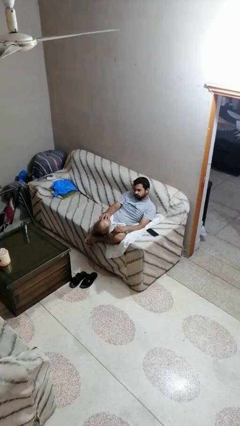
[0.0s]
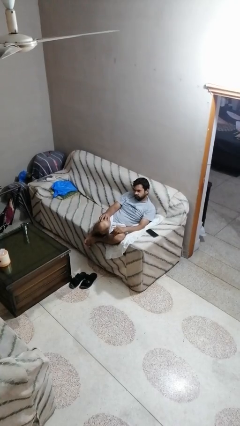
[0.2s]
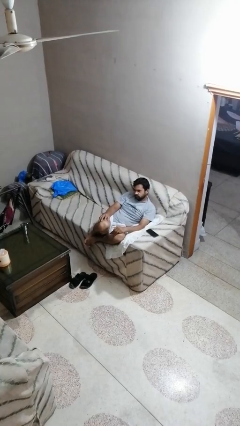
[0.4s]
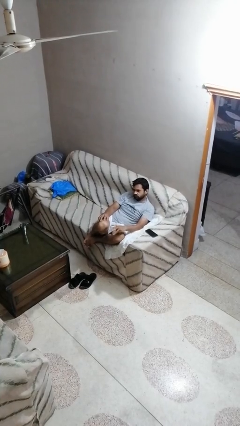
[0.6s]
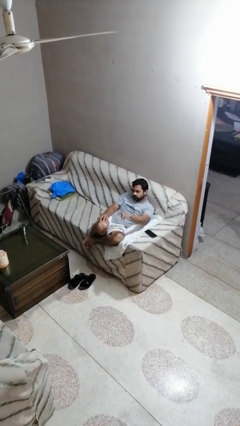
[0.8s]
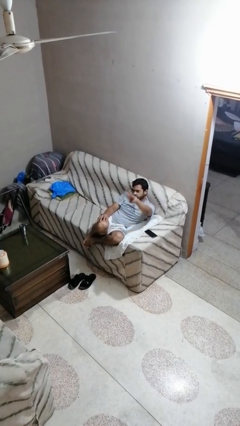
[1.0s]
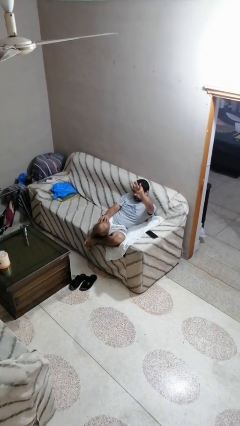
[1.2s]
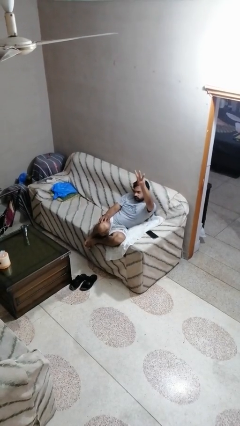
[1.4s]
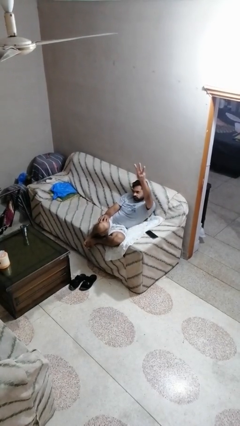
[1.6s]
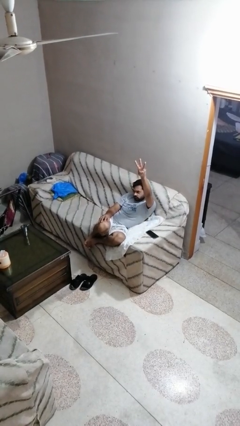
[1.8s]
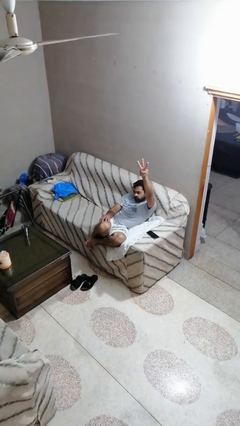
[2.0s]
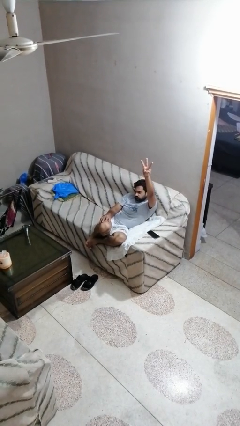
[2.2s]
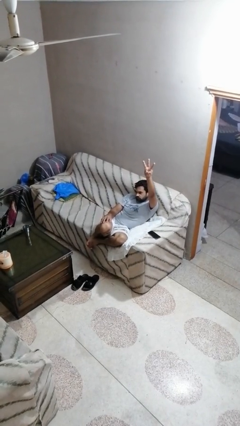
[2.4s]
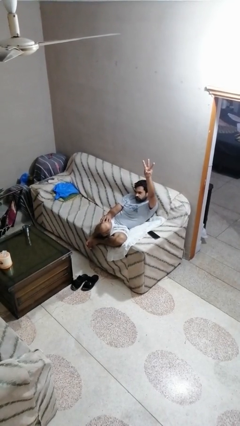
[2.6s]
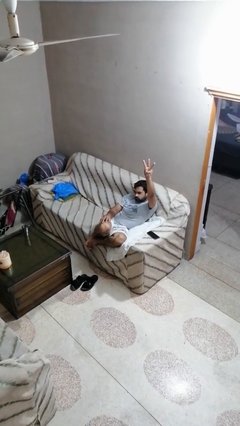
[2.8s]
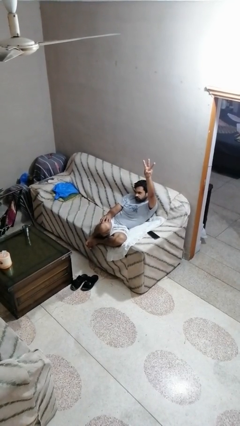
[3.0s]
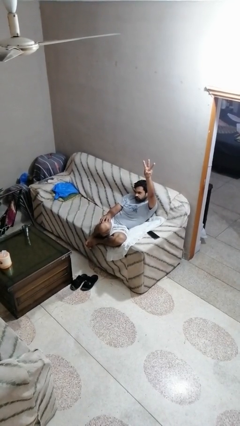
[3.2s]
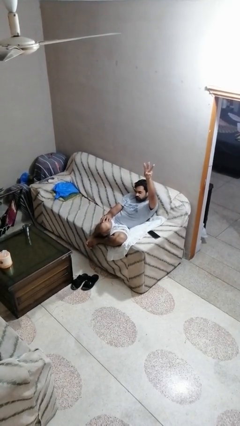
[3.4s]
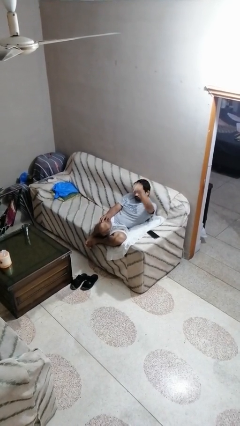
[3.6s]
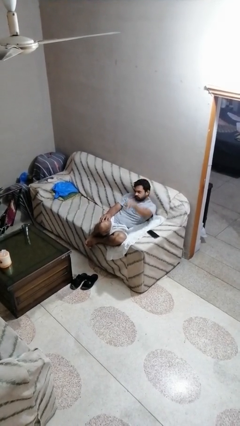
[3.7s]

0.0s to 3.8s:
person gestures number three

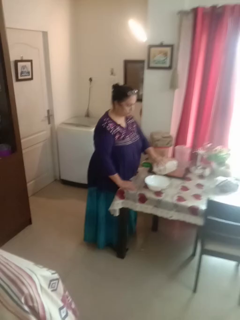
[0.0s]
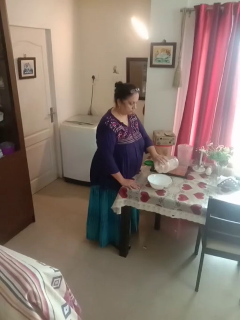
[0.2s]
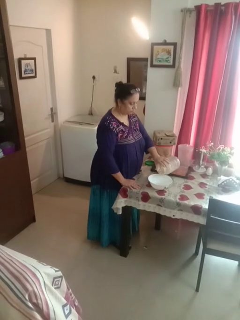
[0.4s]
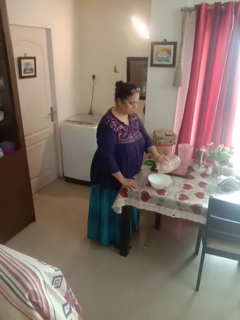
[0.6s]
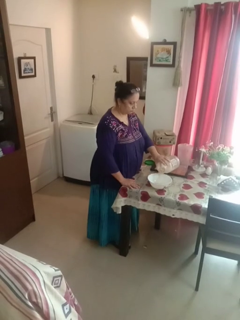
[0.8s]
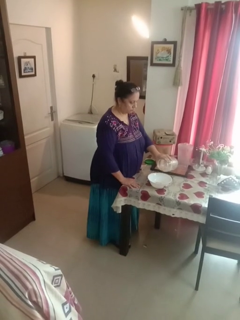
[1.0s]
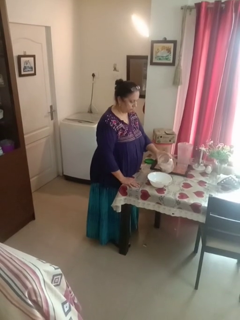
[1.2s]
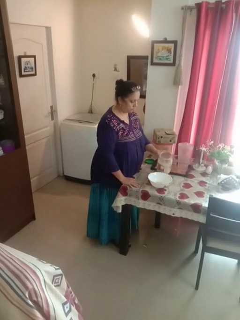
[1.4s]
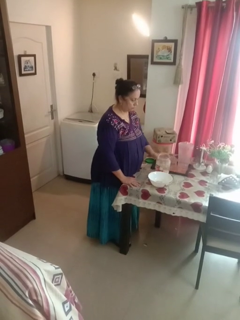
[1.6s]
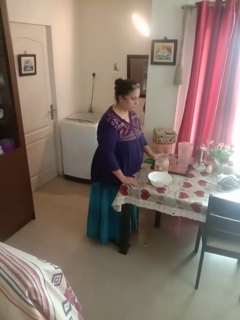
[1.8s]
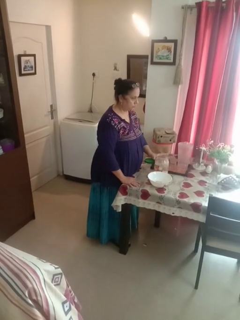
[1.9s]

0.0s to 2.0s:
person pours into bowl

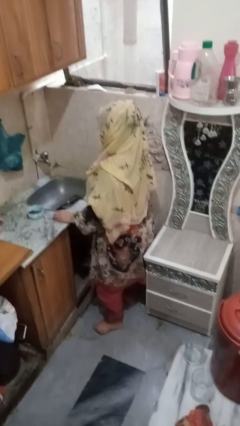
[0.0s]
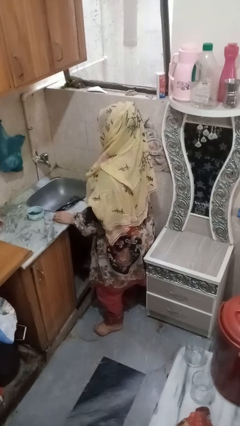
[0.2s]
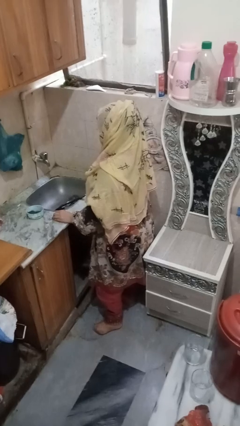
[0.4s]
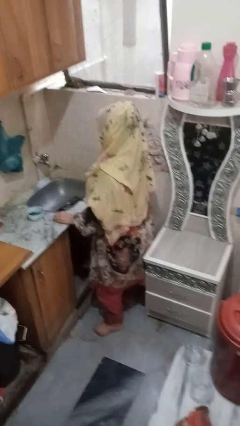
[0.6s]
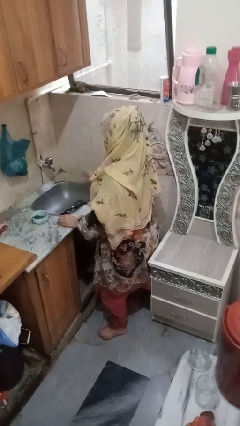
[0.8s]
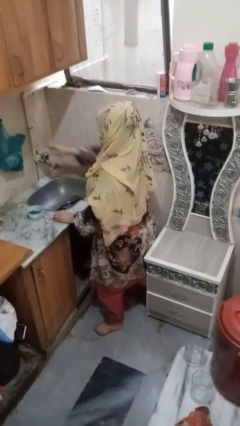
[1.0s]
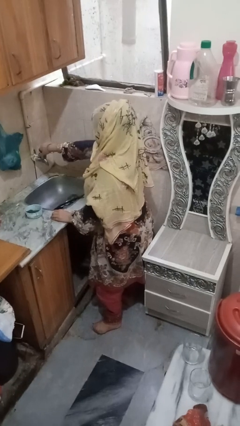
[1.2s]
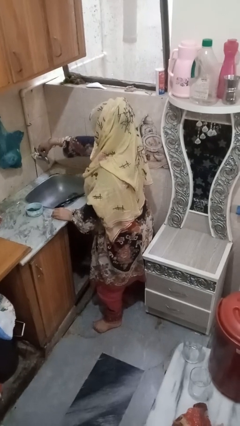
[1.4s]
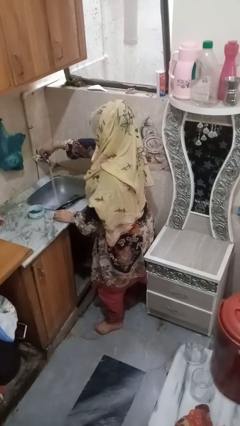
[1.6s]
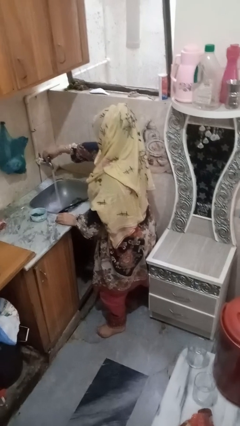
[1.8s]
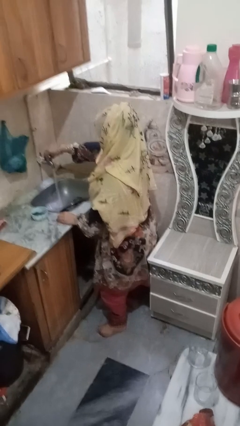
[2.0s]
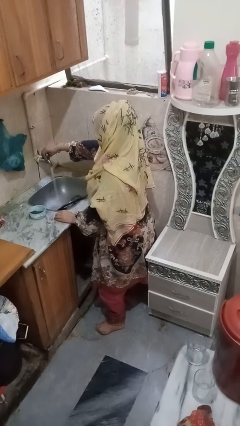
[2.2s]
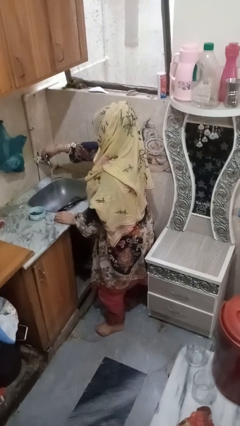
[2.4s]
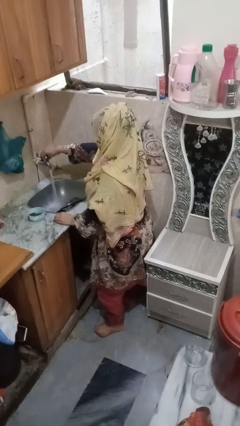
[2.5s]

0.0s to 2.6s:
person turns on faucet

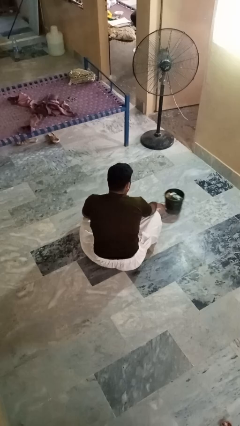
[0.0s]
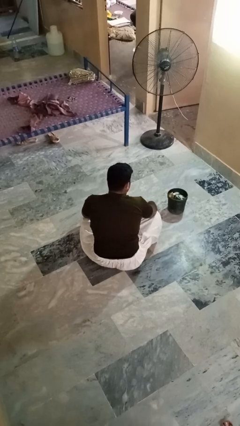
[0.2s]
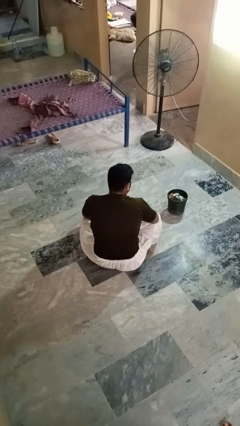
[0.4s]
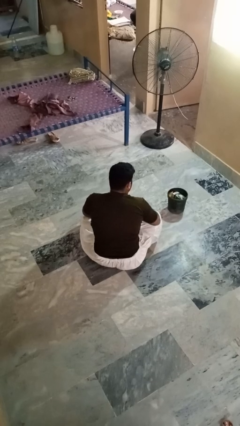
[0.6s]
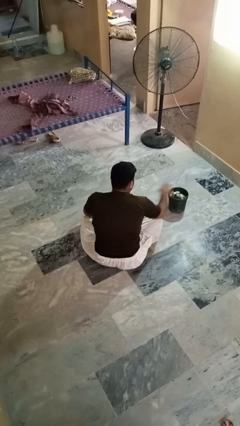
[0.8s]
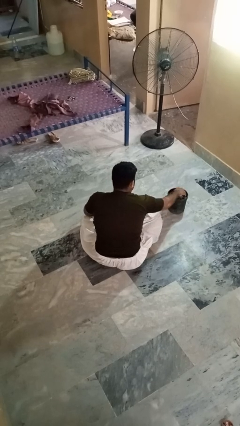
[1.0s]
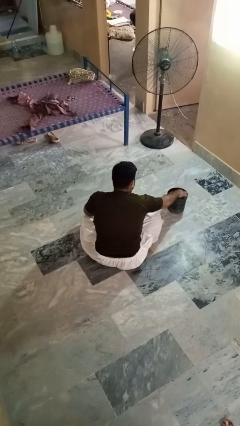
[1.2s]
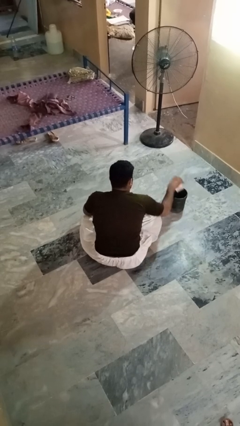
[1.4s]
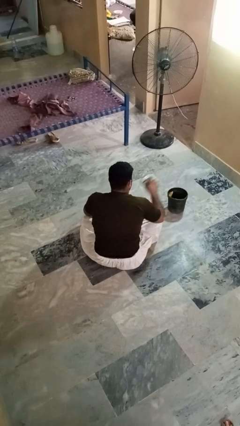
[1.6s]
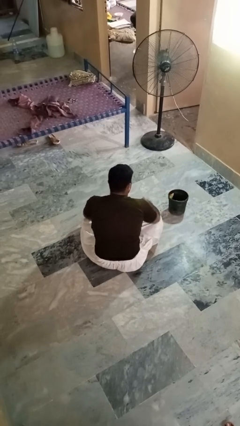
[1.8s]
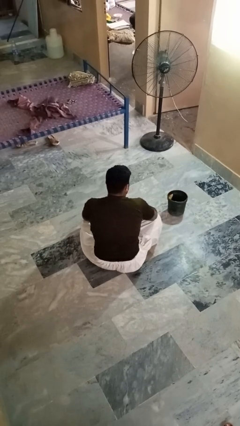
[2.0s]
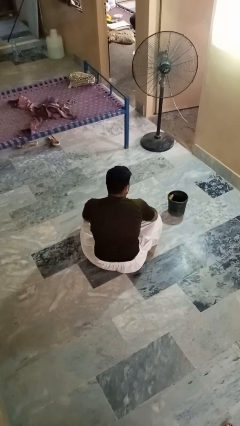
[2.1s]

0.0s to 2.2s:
person takes object from basket

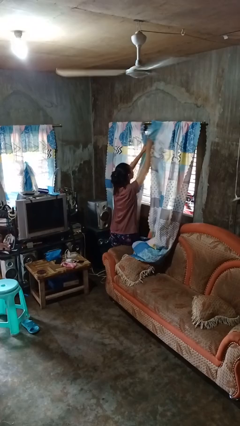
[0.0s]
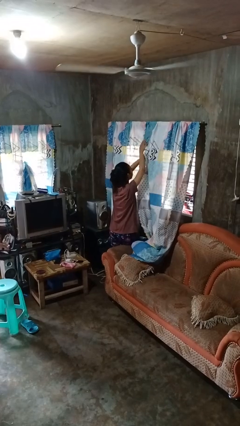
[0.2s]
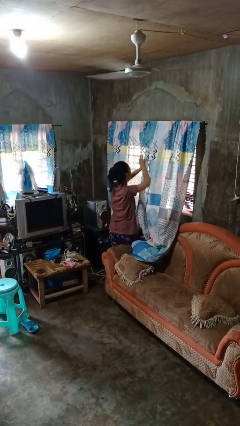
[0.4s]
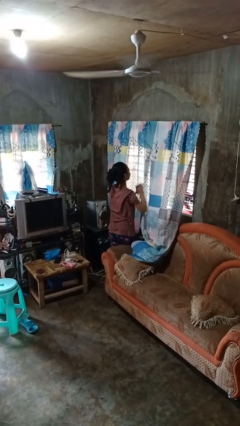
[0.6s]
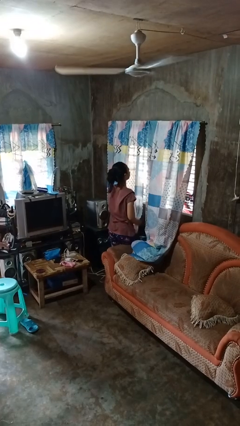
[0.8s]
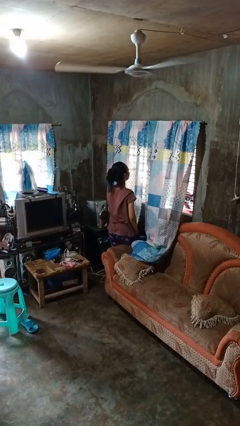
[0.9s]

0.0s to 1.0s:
person closes curtains

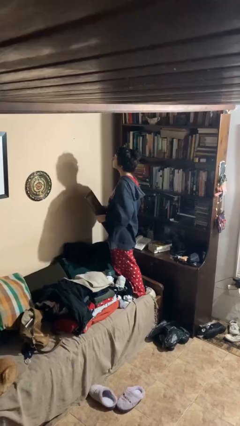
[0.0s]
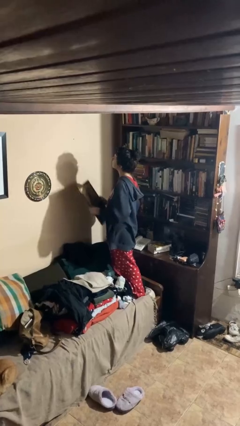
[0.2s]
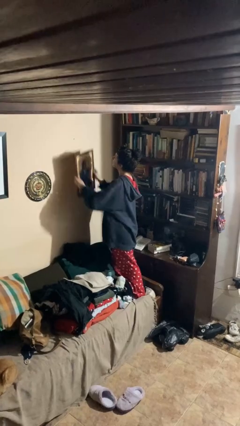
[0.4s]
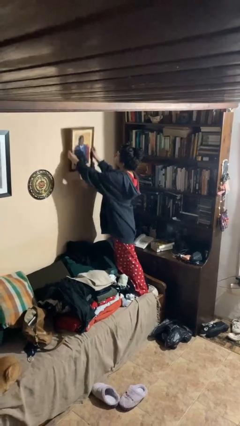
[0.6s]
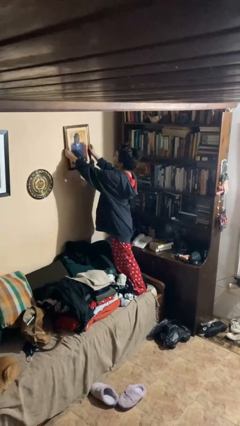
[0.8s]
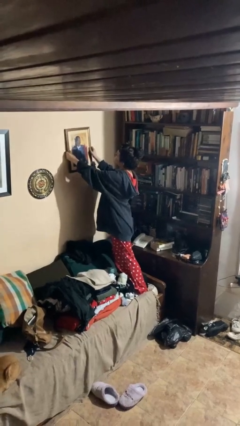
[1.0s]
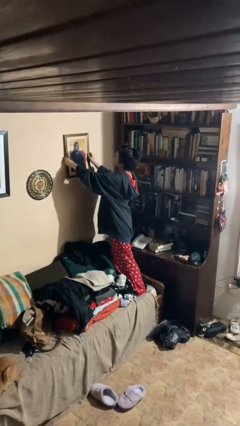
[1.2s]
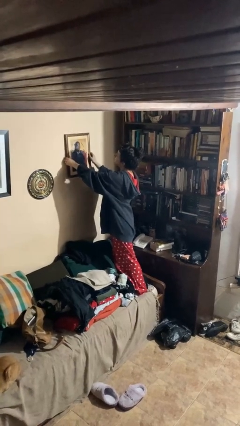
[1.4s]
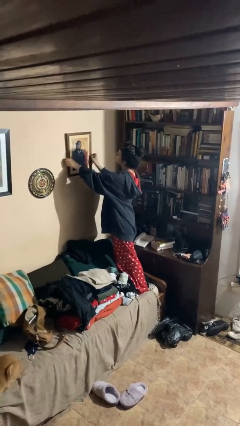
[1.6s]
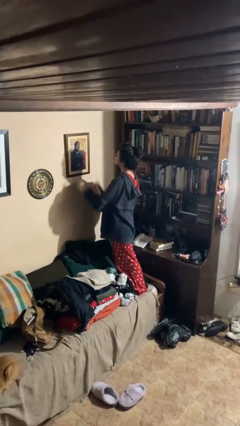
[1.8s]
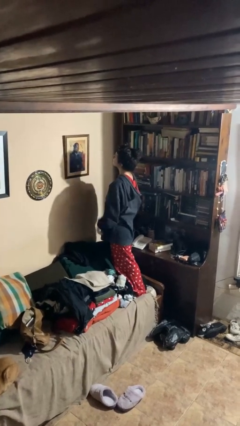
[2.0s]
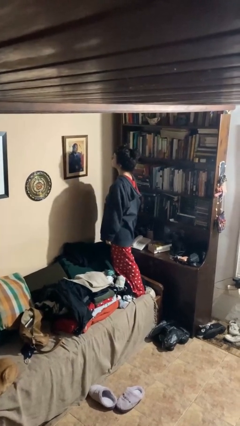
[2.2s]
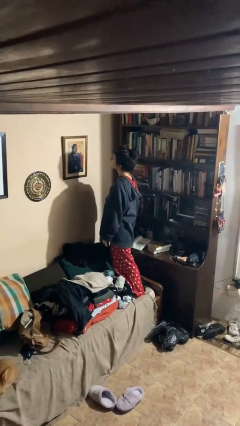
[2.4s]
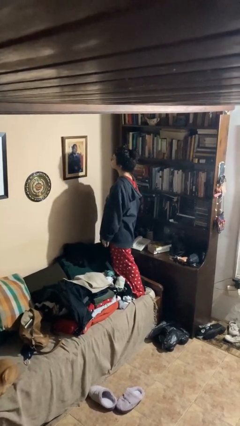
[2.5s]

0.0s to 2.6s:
person puts up picture frame

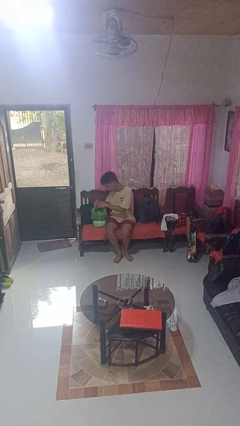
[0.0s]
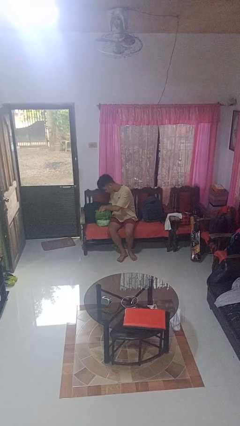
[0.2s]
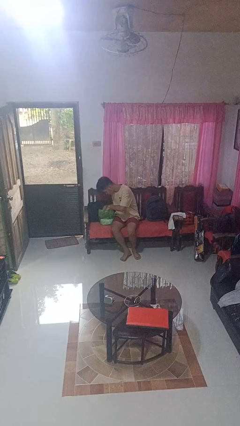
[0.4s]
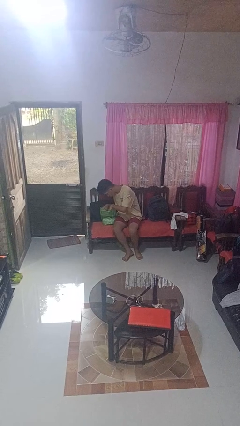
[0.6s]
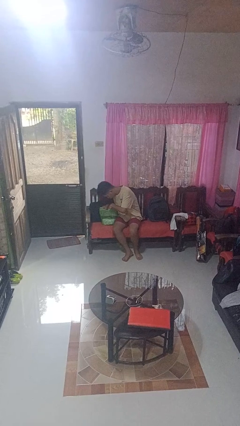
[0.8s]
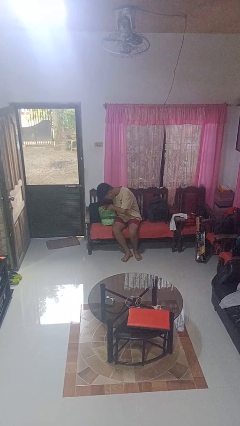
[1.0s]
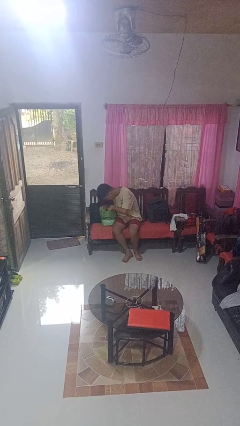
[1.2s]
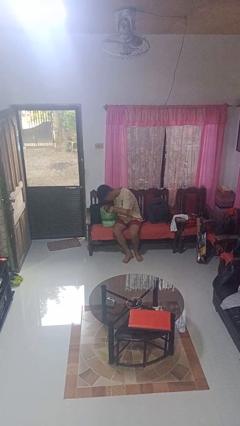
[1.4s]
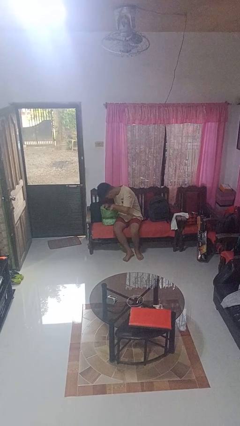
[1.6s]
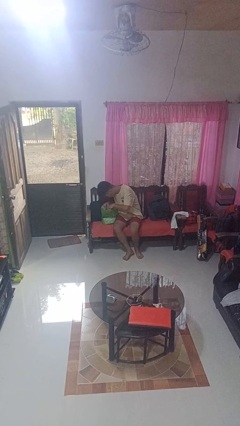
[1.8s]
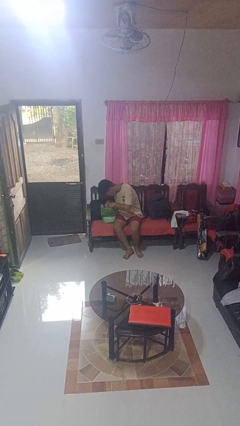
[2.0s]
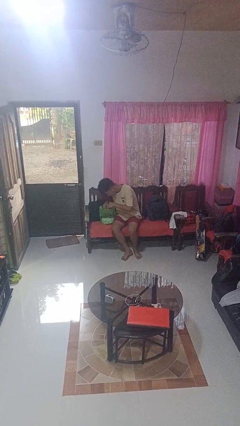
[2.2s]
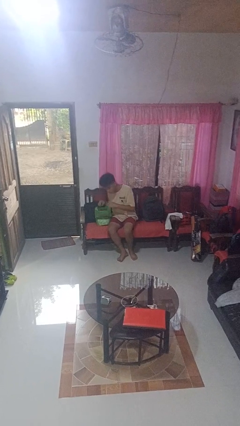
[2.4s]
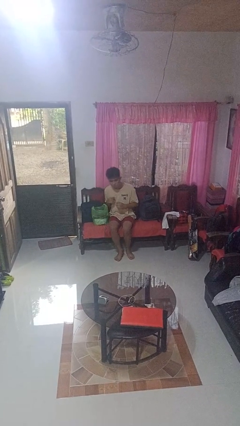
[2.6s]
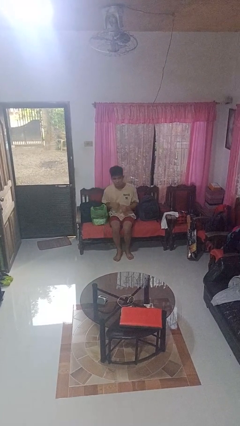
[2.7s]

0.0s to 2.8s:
person searches in bag

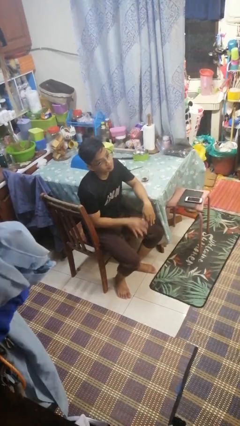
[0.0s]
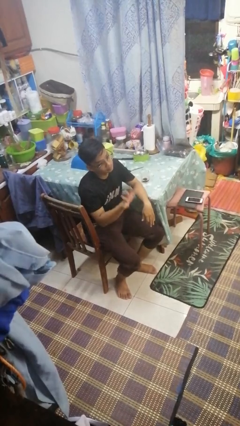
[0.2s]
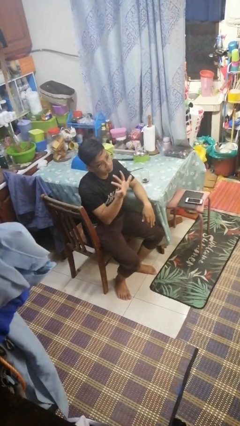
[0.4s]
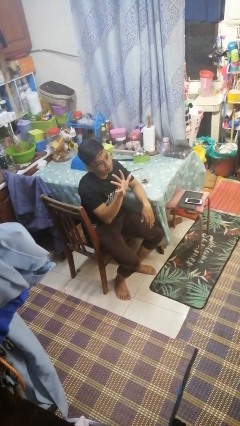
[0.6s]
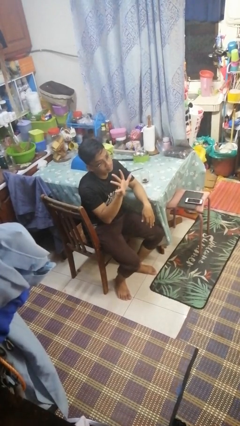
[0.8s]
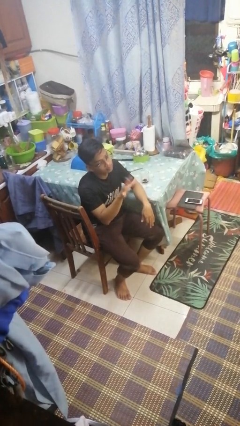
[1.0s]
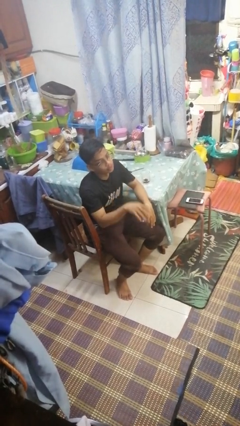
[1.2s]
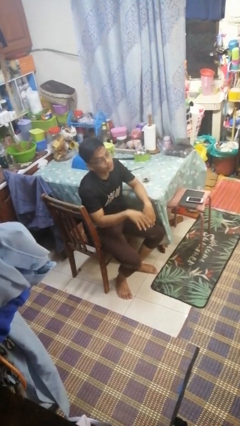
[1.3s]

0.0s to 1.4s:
person gestures number five
